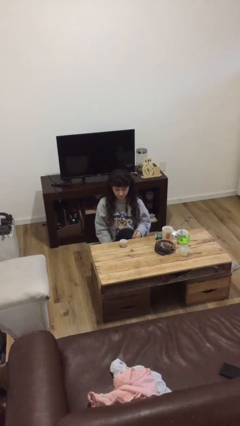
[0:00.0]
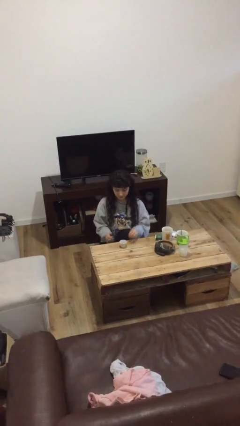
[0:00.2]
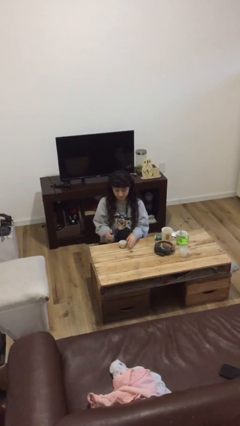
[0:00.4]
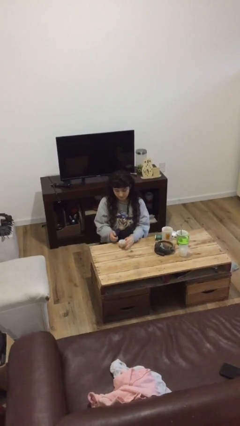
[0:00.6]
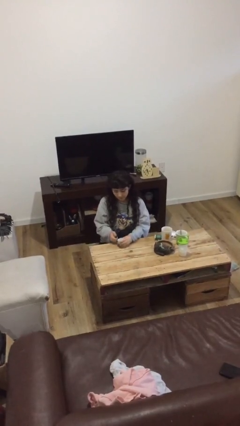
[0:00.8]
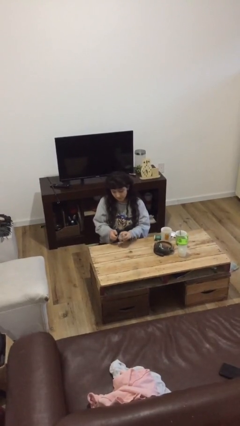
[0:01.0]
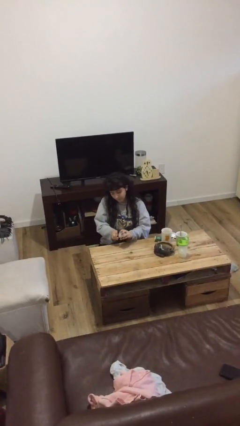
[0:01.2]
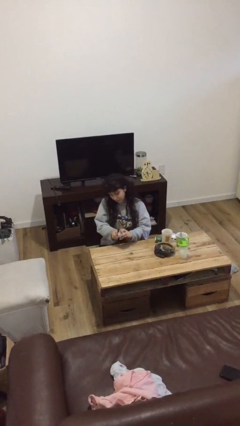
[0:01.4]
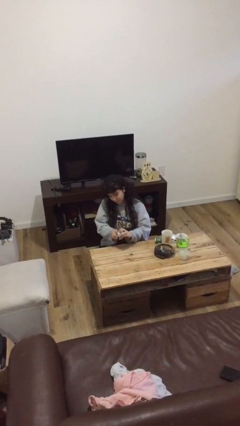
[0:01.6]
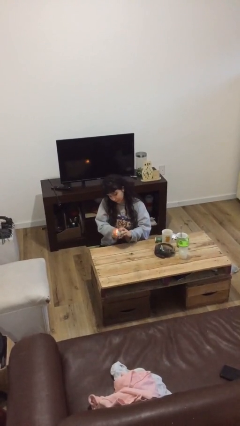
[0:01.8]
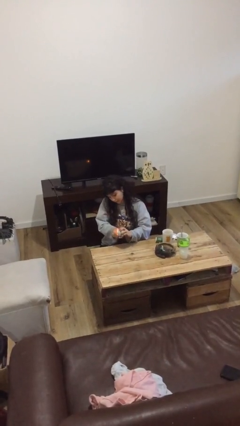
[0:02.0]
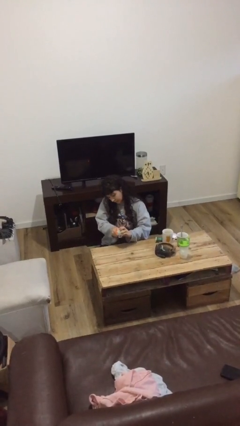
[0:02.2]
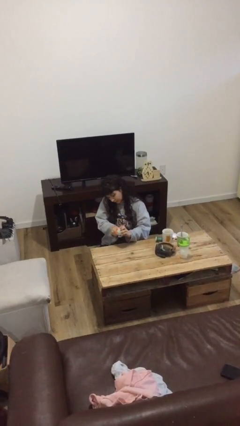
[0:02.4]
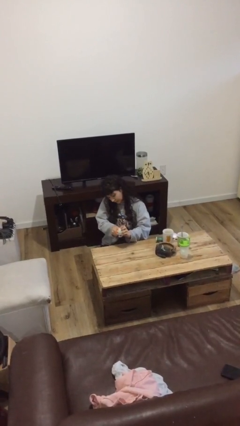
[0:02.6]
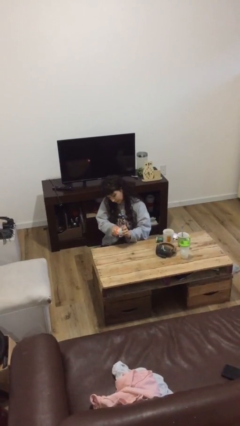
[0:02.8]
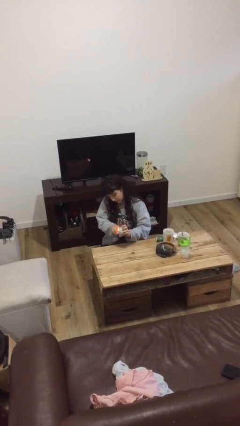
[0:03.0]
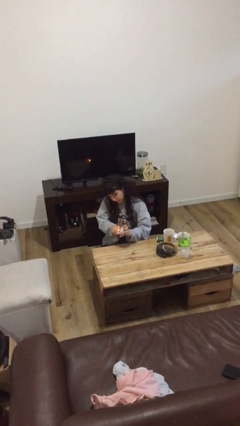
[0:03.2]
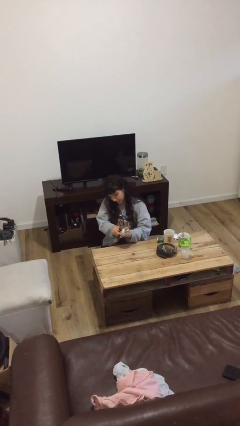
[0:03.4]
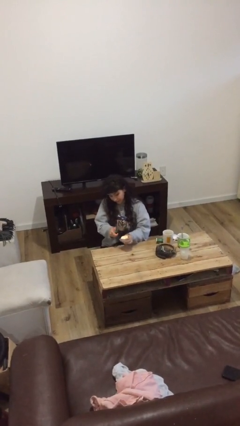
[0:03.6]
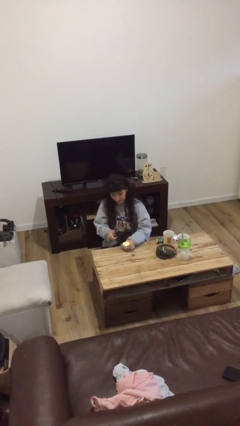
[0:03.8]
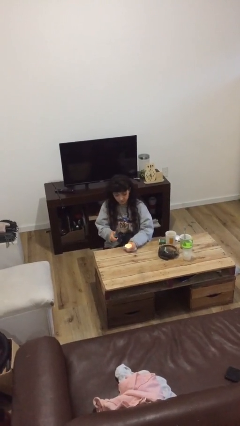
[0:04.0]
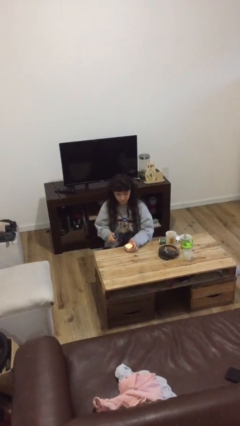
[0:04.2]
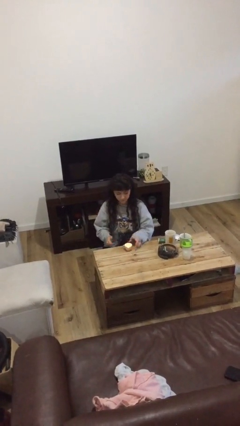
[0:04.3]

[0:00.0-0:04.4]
person lights candle

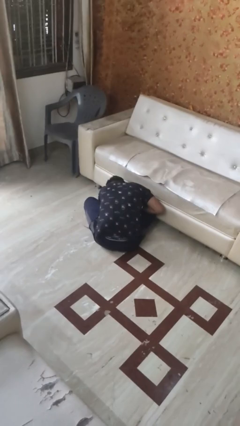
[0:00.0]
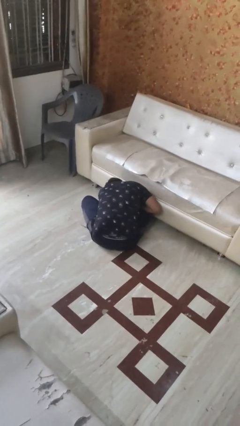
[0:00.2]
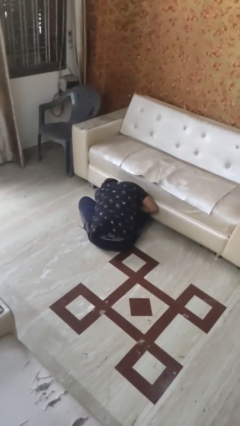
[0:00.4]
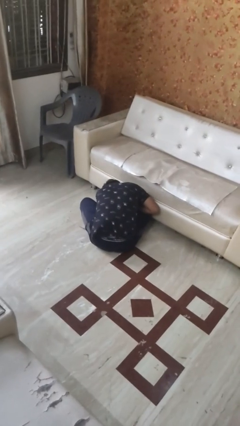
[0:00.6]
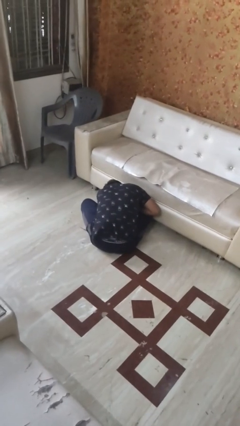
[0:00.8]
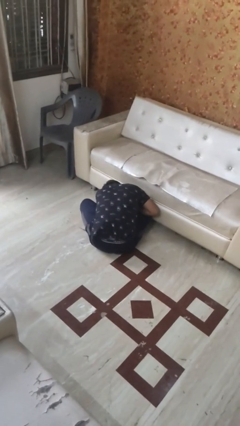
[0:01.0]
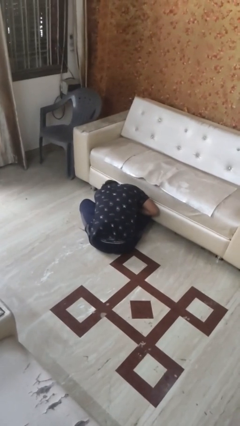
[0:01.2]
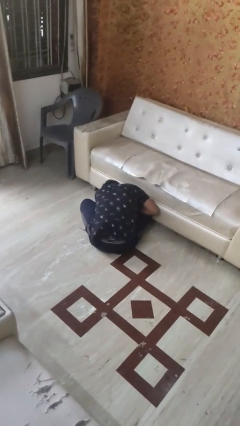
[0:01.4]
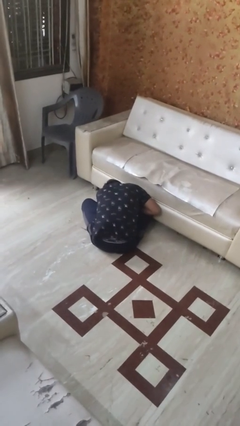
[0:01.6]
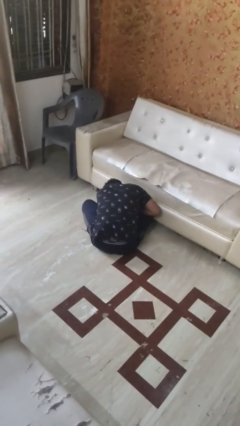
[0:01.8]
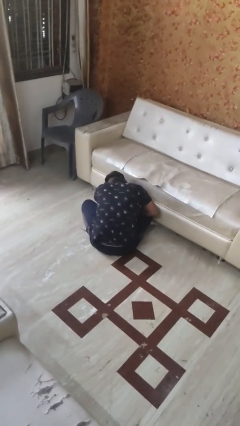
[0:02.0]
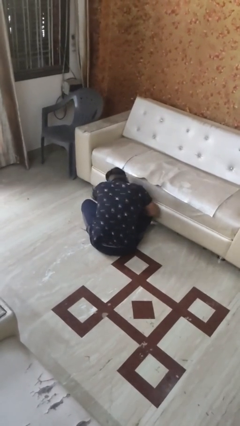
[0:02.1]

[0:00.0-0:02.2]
person searches under bed

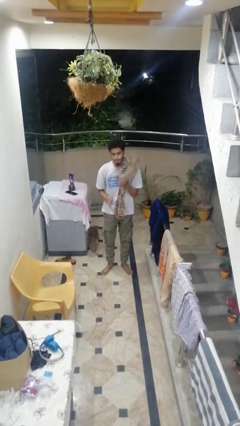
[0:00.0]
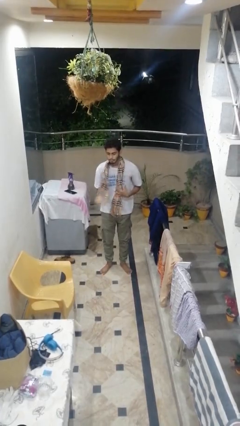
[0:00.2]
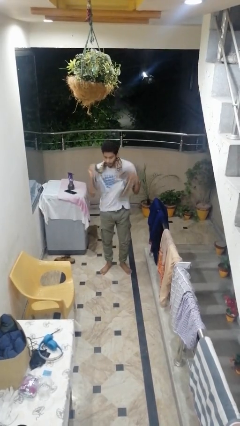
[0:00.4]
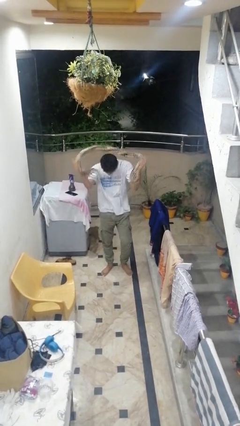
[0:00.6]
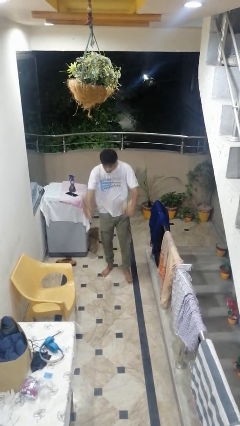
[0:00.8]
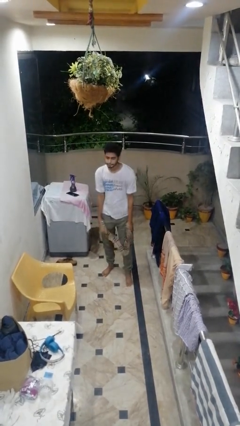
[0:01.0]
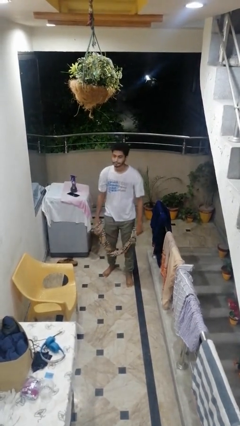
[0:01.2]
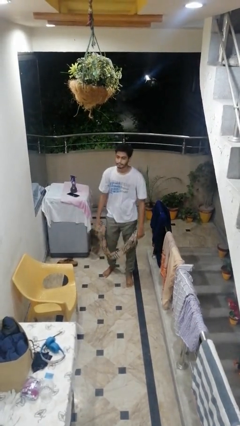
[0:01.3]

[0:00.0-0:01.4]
person takes off scarf

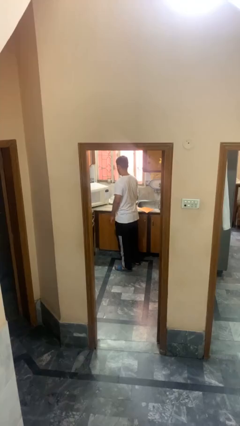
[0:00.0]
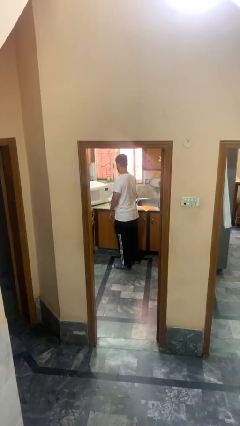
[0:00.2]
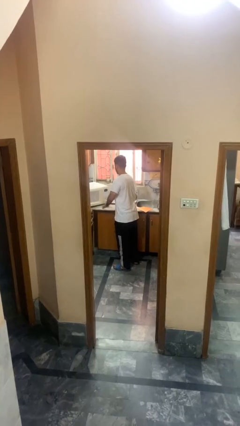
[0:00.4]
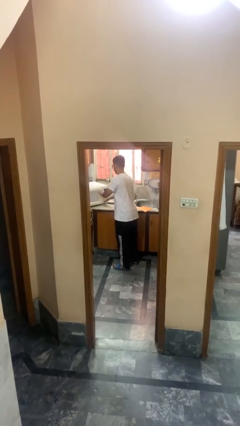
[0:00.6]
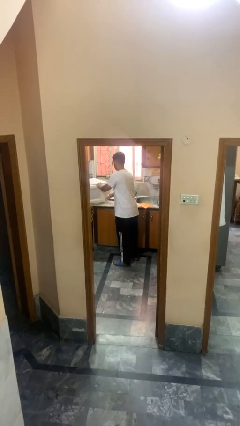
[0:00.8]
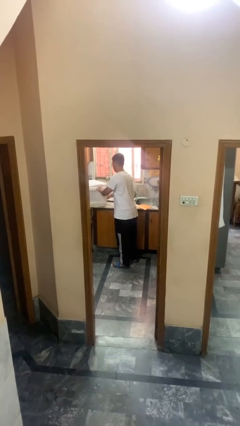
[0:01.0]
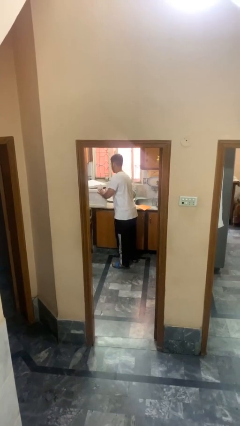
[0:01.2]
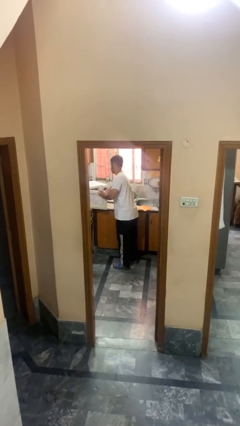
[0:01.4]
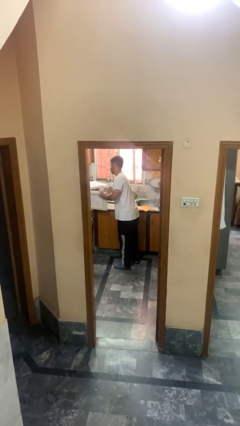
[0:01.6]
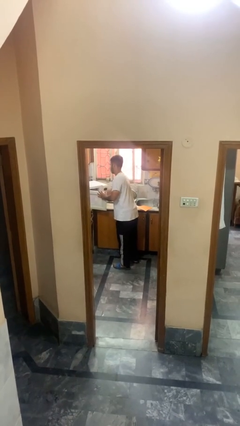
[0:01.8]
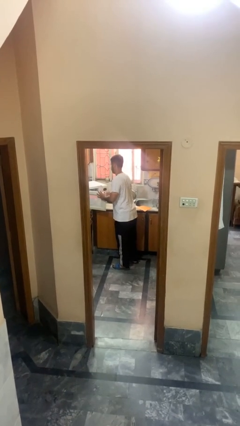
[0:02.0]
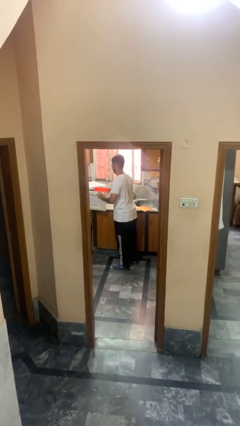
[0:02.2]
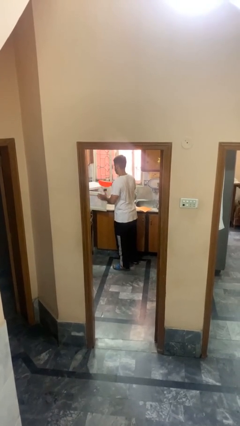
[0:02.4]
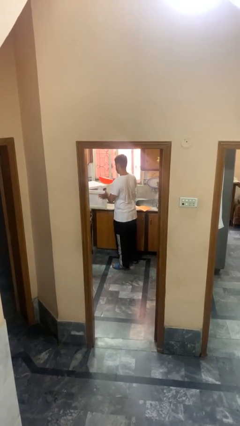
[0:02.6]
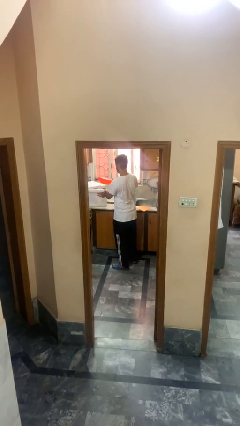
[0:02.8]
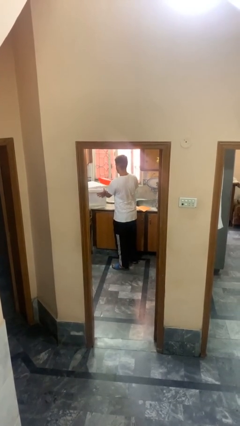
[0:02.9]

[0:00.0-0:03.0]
person takes object from microwave

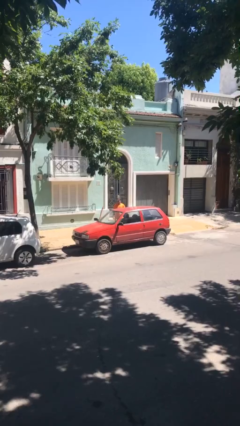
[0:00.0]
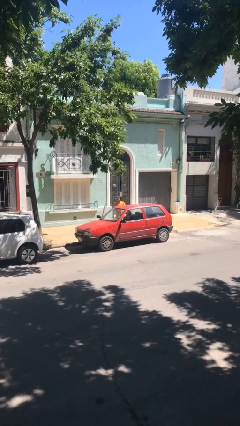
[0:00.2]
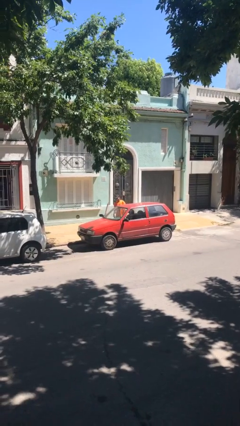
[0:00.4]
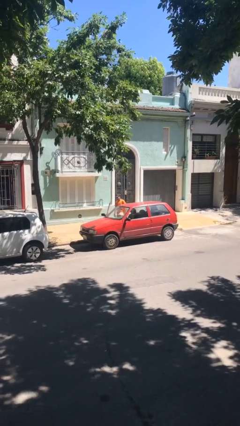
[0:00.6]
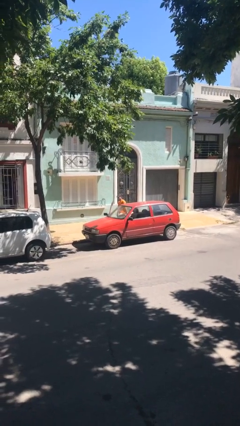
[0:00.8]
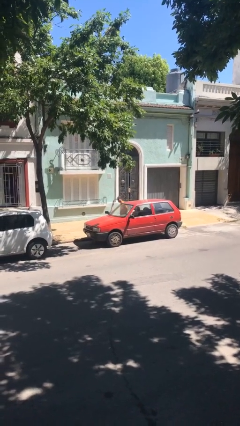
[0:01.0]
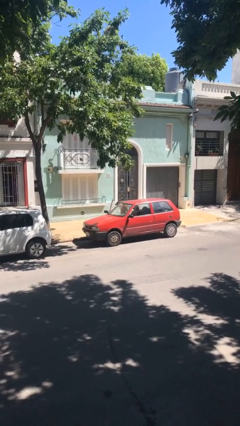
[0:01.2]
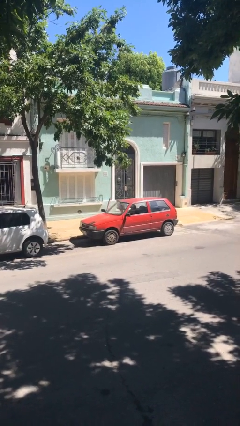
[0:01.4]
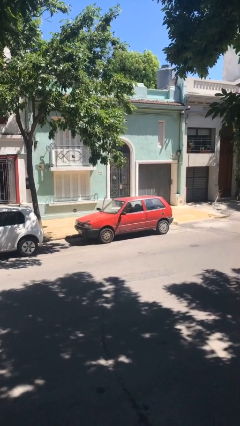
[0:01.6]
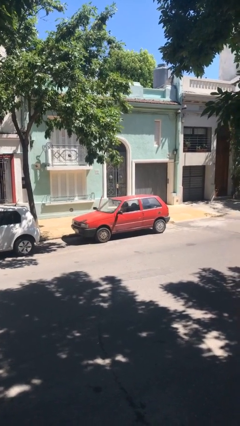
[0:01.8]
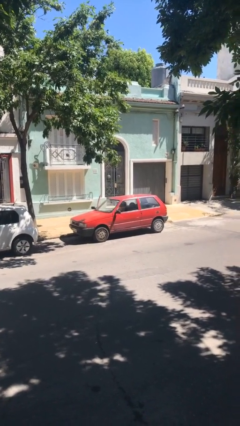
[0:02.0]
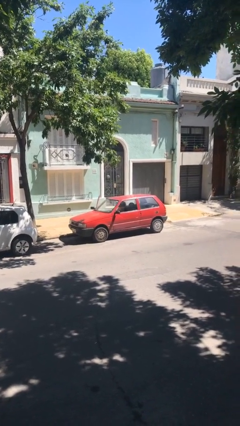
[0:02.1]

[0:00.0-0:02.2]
person enters car

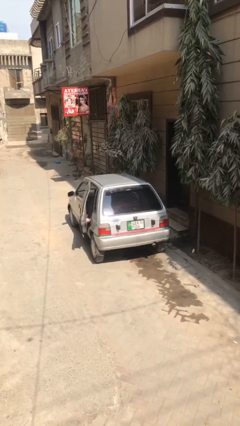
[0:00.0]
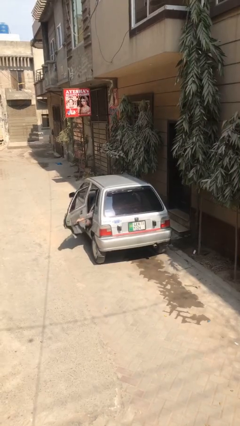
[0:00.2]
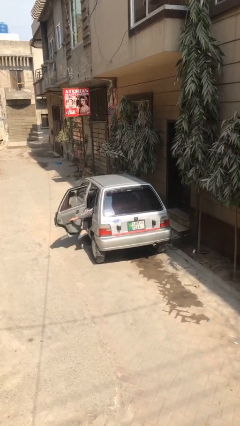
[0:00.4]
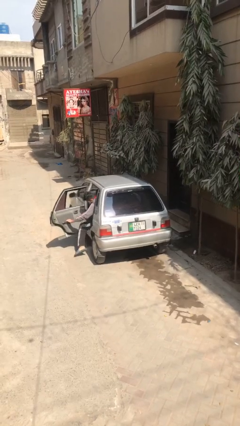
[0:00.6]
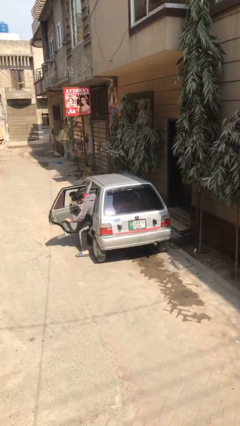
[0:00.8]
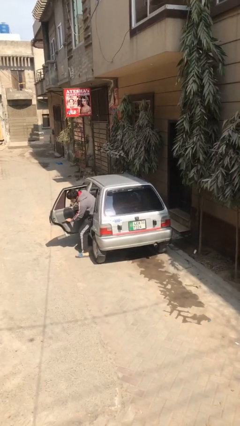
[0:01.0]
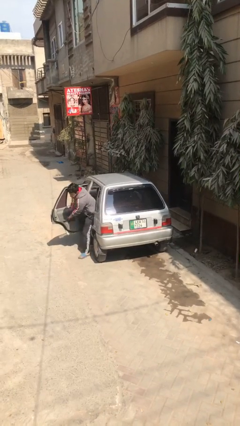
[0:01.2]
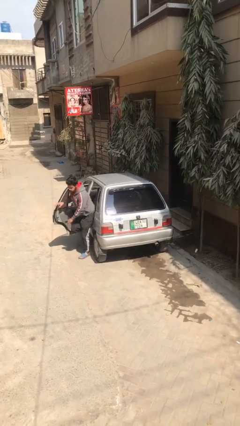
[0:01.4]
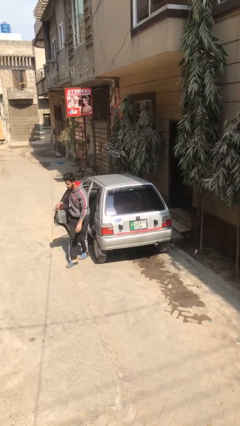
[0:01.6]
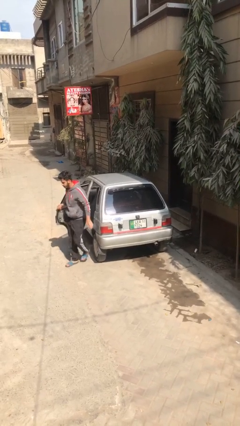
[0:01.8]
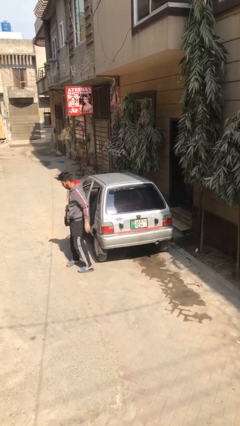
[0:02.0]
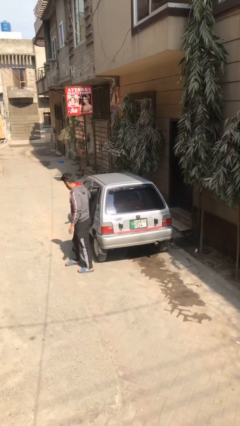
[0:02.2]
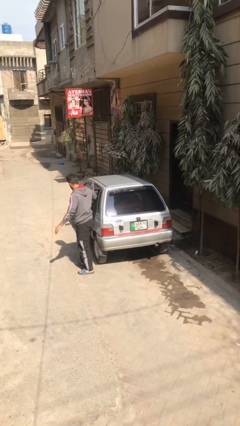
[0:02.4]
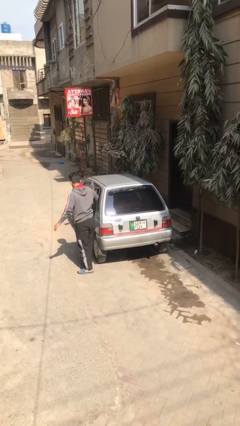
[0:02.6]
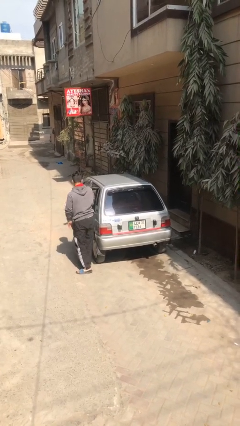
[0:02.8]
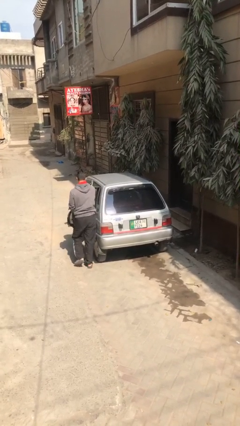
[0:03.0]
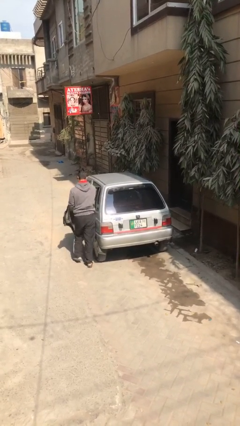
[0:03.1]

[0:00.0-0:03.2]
car drops off person

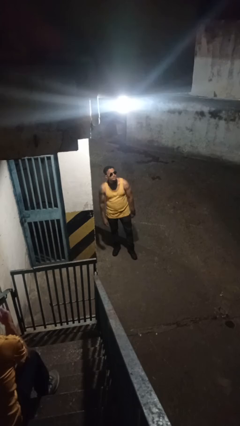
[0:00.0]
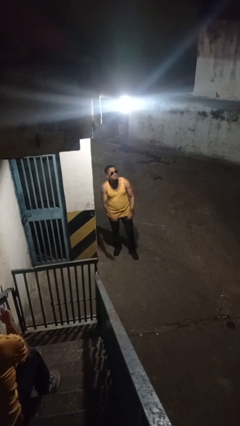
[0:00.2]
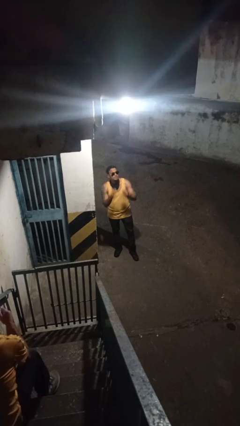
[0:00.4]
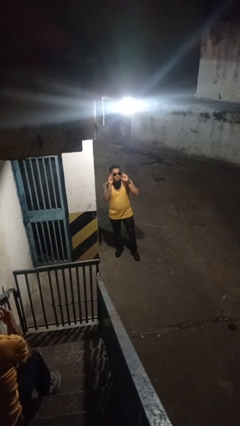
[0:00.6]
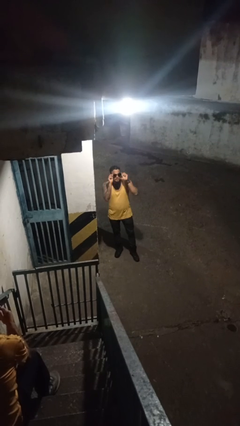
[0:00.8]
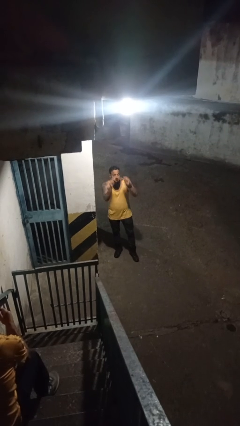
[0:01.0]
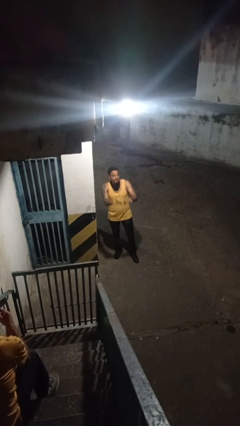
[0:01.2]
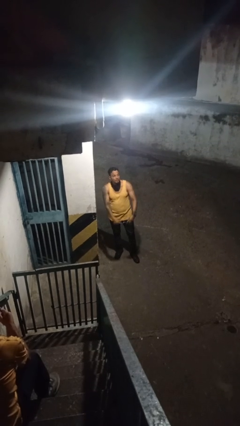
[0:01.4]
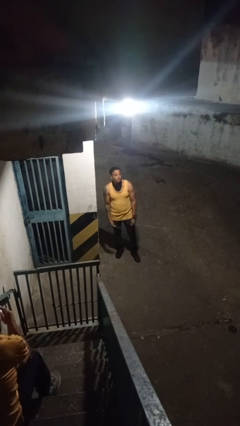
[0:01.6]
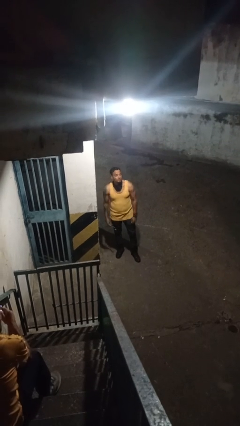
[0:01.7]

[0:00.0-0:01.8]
person takes off sunglasses
